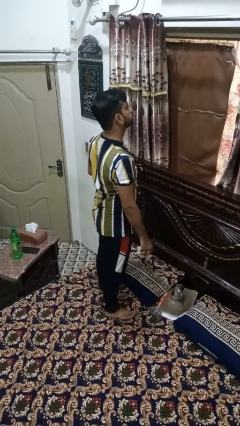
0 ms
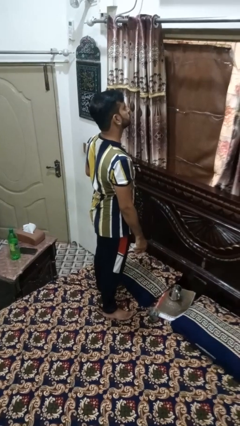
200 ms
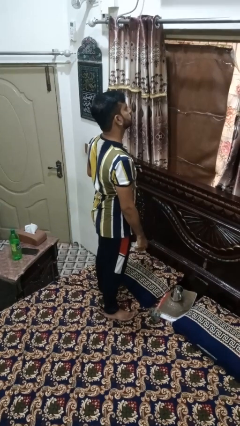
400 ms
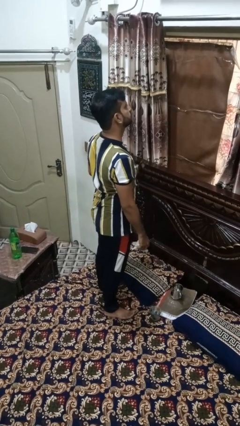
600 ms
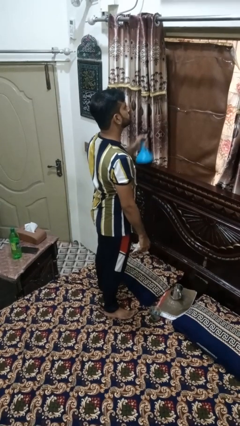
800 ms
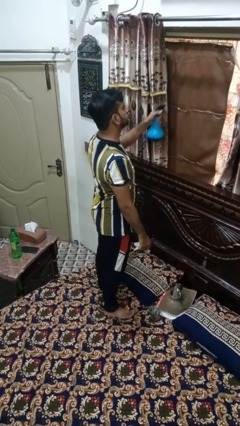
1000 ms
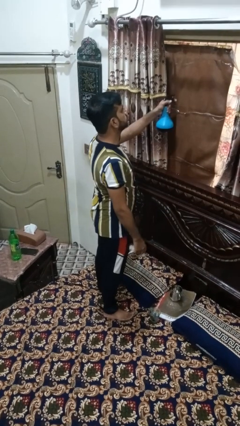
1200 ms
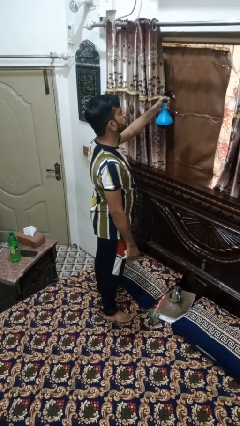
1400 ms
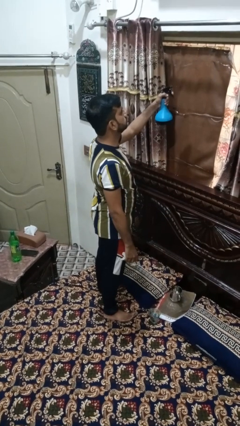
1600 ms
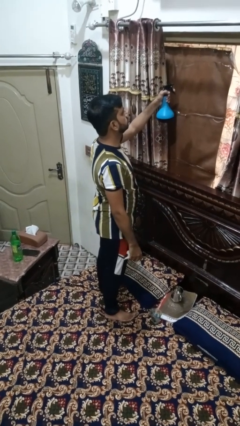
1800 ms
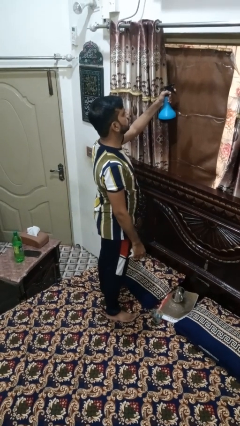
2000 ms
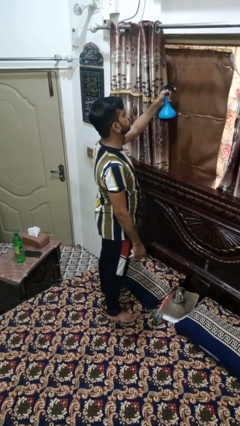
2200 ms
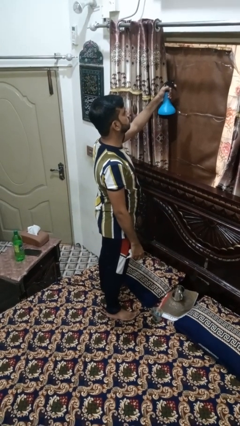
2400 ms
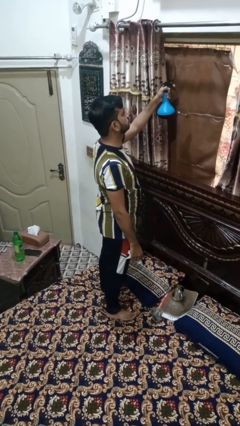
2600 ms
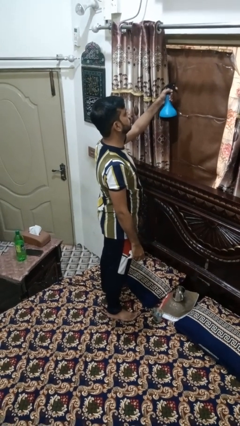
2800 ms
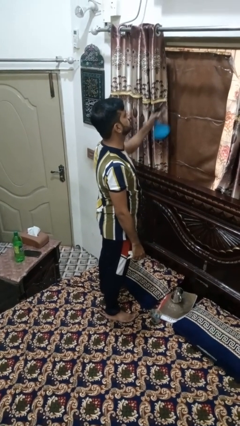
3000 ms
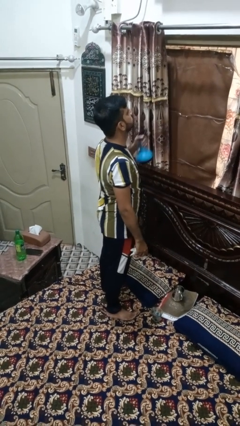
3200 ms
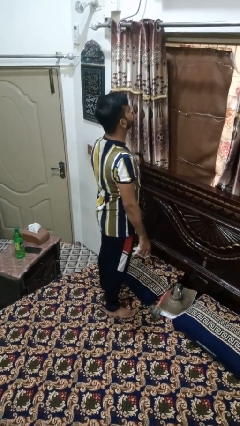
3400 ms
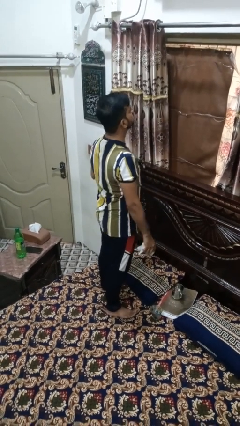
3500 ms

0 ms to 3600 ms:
person sprays from bottle

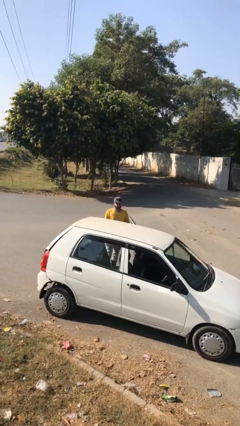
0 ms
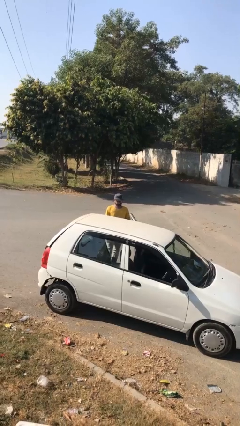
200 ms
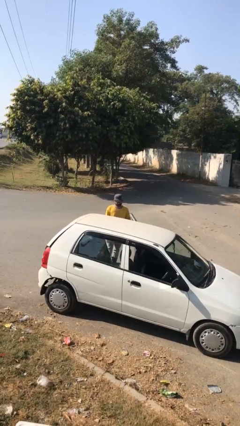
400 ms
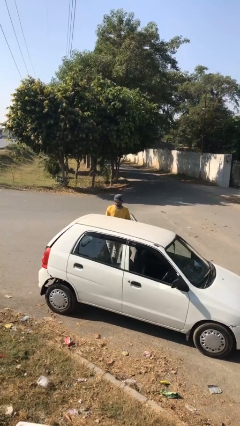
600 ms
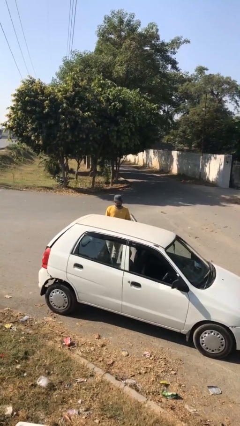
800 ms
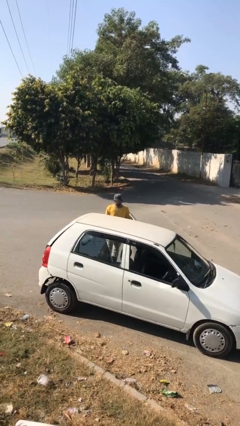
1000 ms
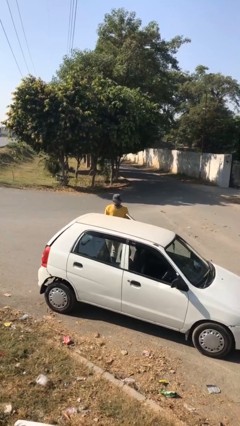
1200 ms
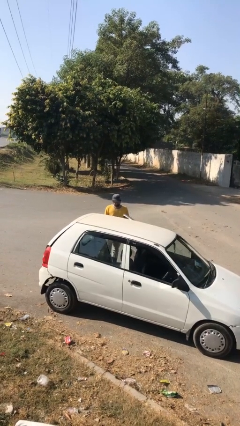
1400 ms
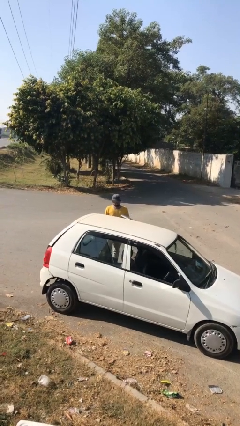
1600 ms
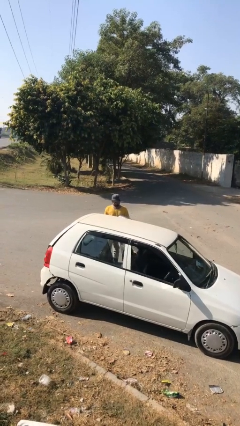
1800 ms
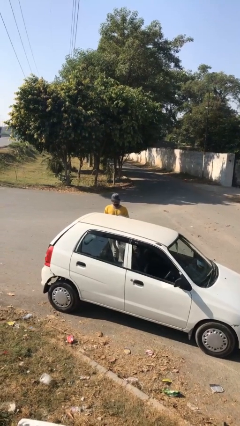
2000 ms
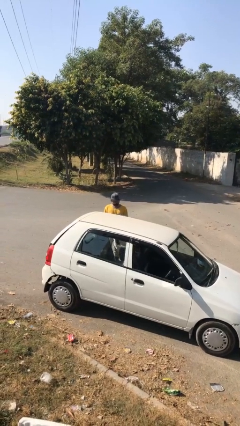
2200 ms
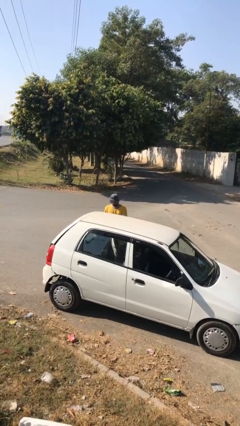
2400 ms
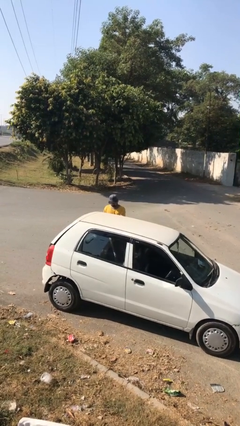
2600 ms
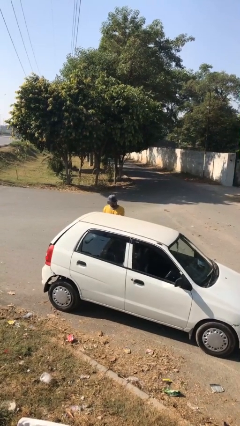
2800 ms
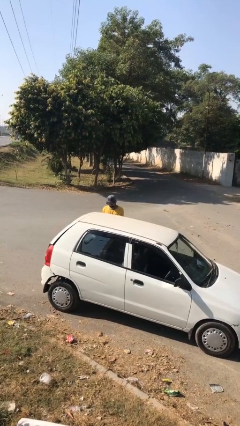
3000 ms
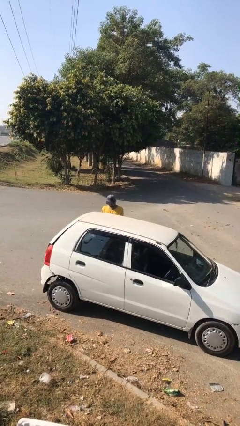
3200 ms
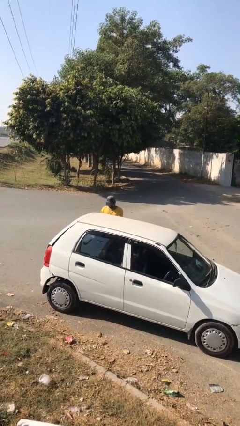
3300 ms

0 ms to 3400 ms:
person closes car door

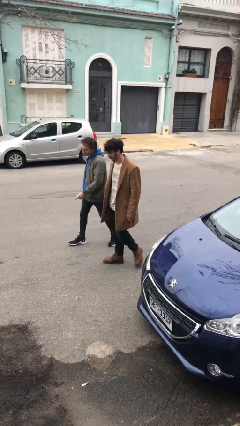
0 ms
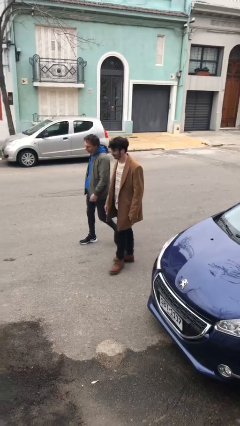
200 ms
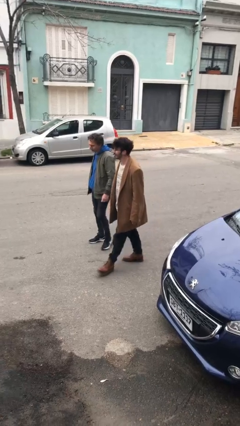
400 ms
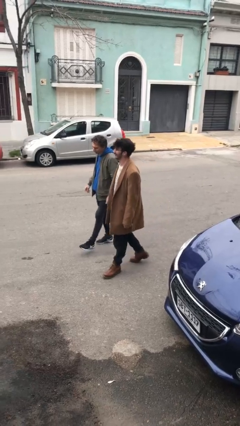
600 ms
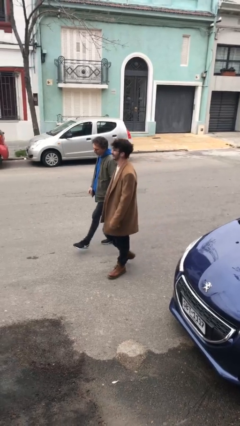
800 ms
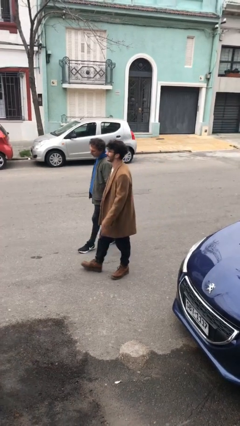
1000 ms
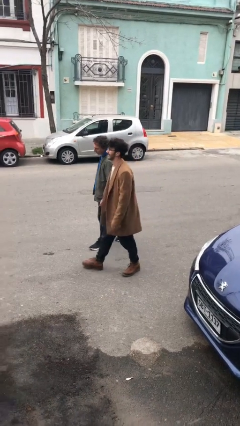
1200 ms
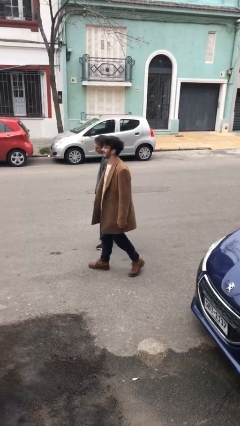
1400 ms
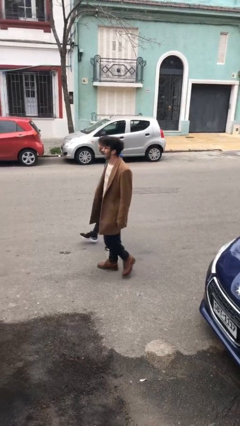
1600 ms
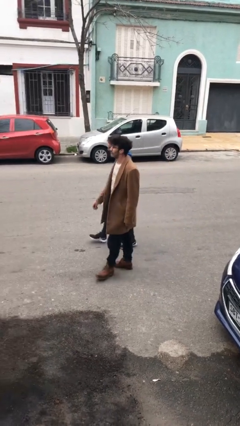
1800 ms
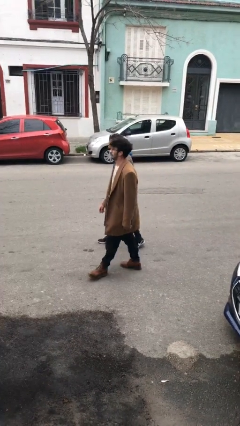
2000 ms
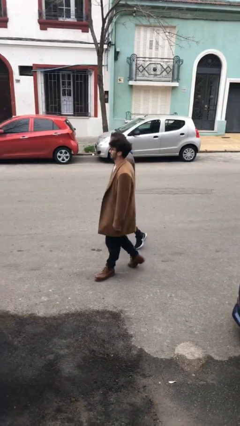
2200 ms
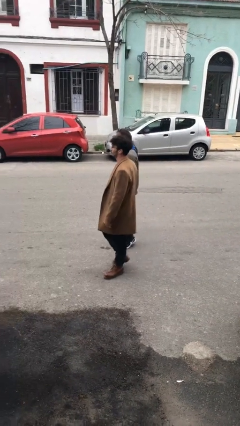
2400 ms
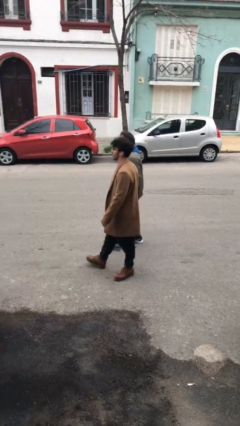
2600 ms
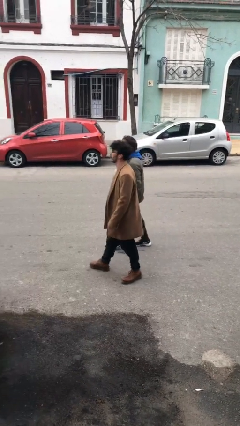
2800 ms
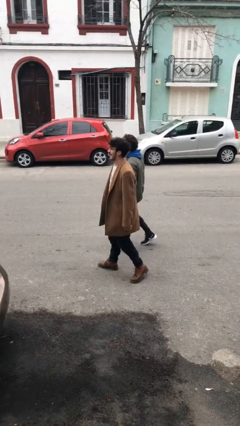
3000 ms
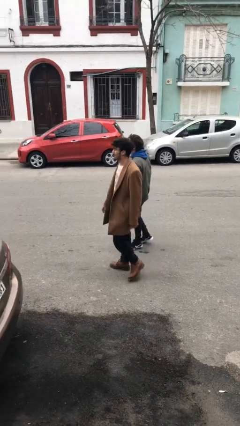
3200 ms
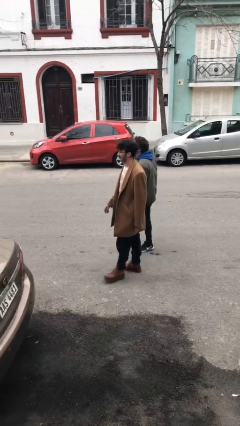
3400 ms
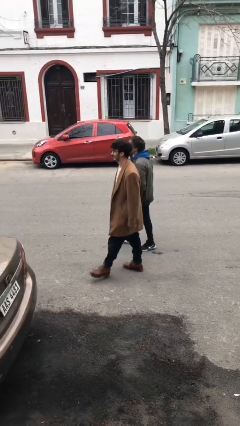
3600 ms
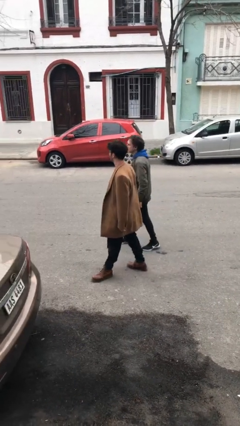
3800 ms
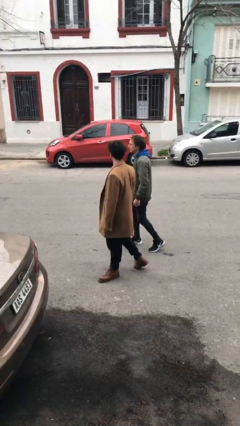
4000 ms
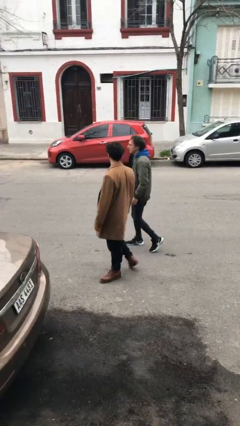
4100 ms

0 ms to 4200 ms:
person talks to person

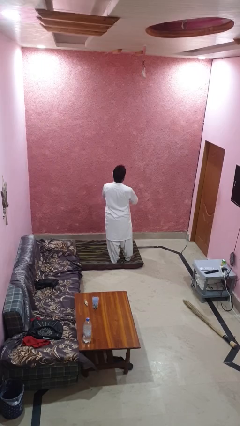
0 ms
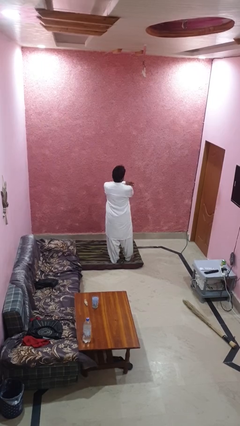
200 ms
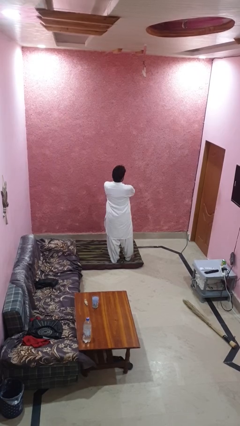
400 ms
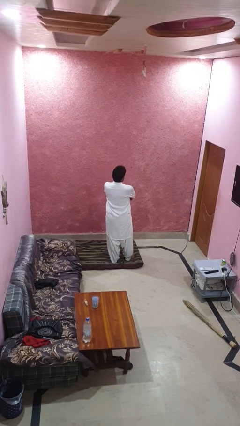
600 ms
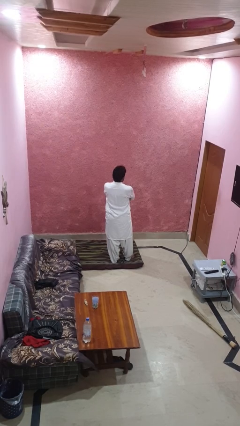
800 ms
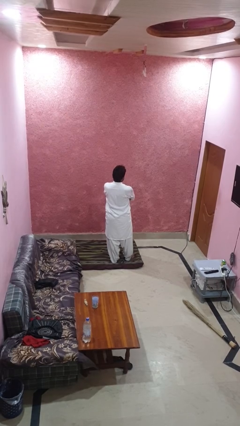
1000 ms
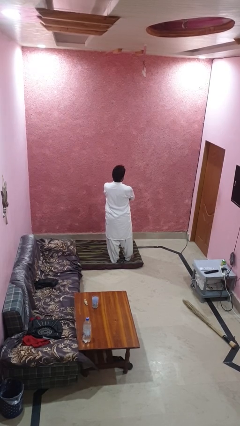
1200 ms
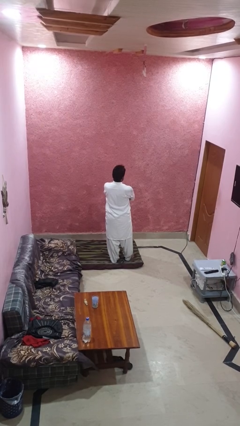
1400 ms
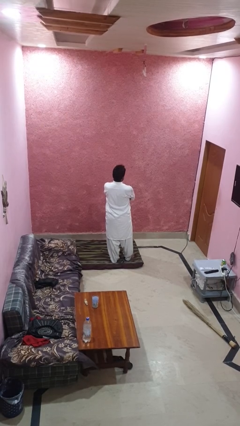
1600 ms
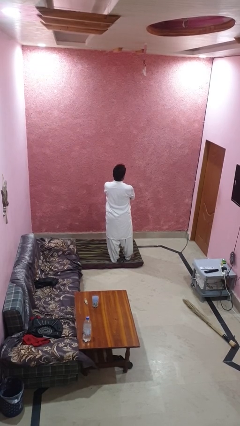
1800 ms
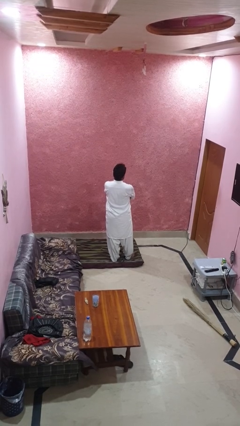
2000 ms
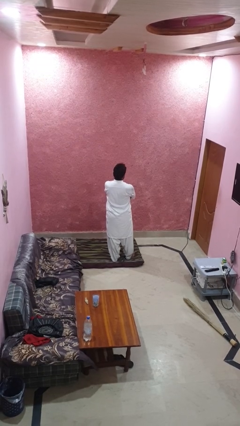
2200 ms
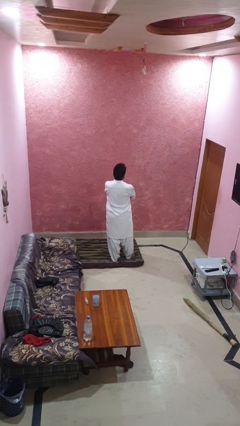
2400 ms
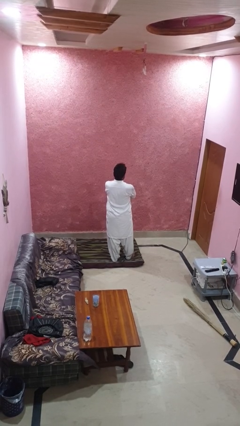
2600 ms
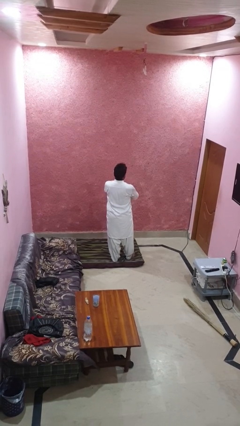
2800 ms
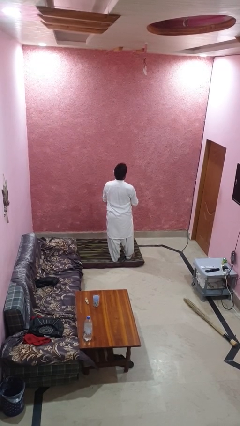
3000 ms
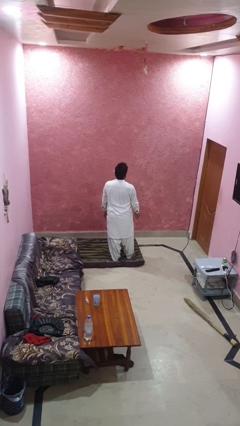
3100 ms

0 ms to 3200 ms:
person crosses arms

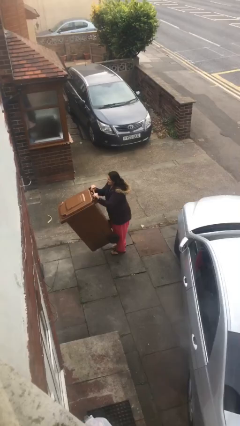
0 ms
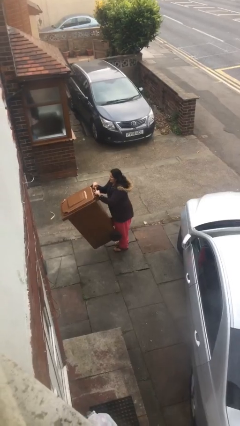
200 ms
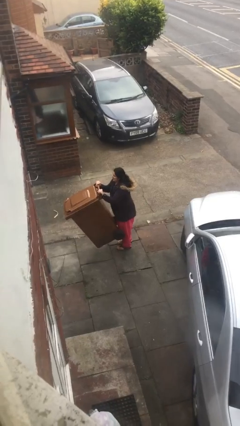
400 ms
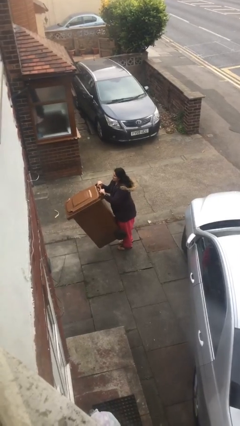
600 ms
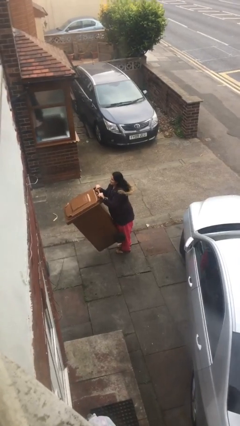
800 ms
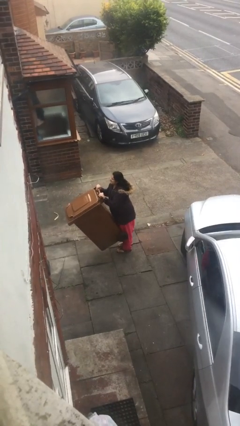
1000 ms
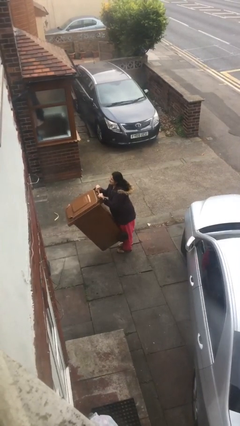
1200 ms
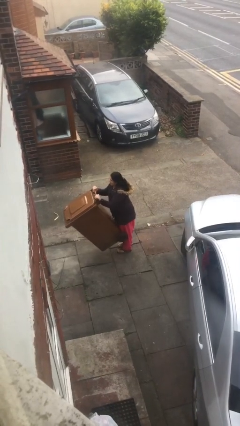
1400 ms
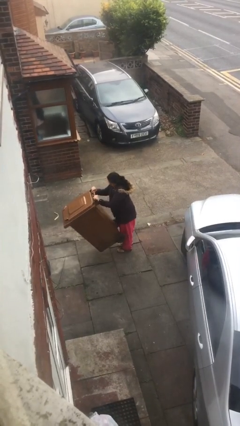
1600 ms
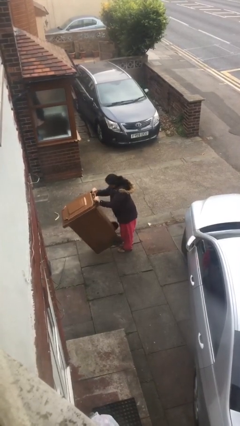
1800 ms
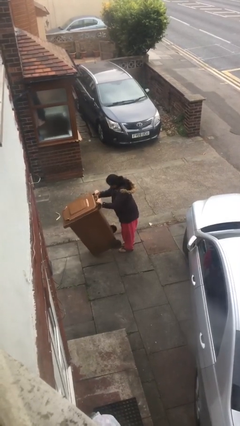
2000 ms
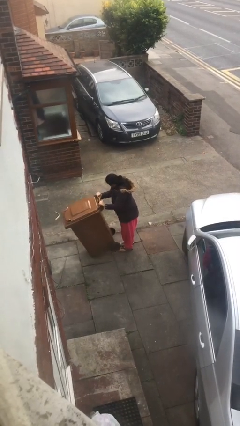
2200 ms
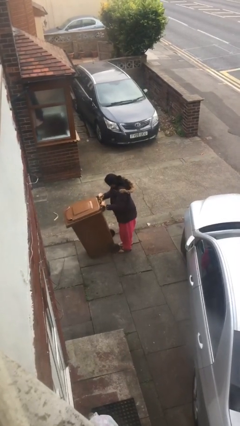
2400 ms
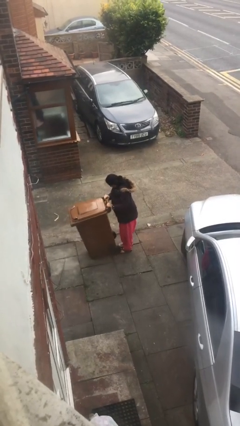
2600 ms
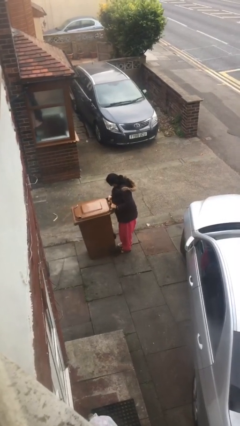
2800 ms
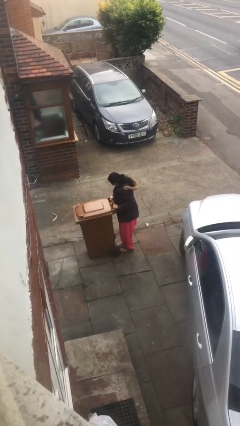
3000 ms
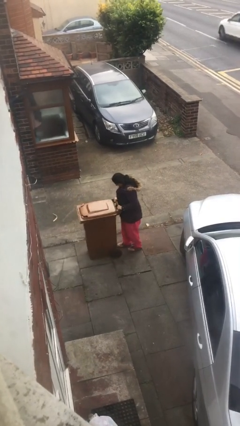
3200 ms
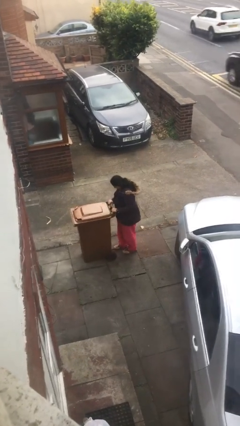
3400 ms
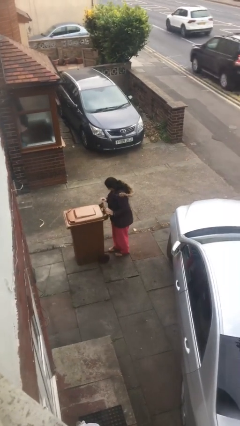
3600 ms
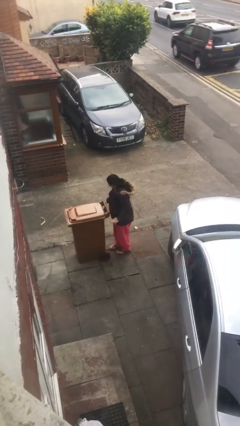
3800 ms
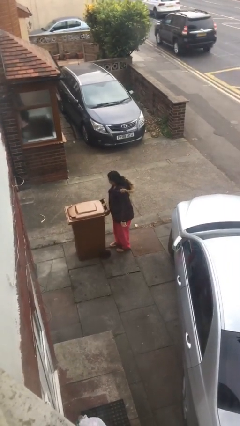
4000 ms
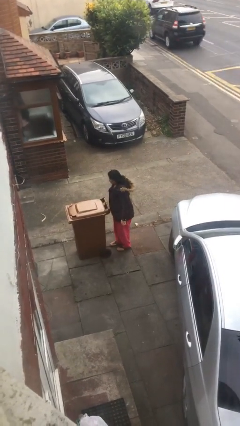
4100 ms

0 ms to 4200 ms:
person puts down object on floor
